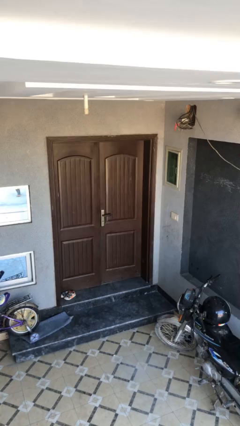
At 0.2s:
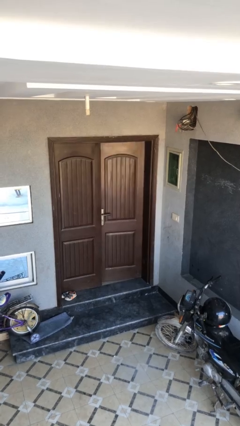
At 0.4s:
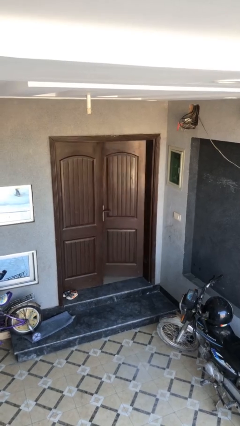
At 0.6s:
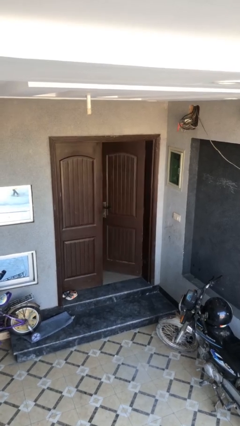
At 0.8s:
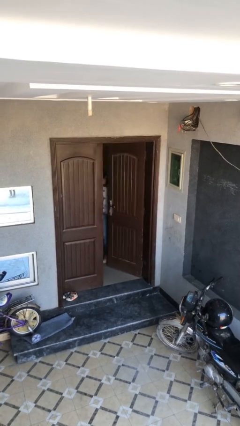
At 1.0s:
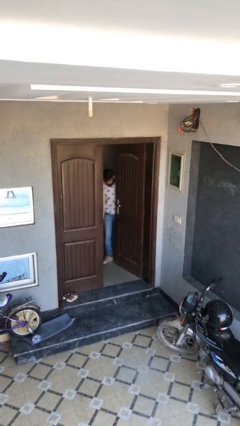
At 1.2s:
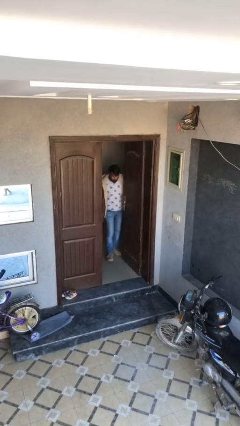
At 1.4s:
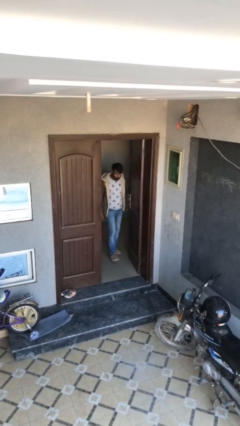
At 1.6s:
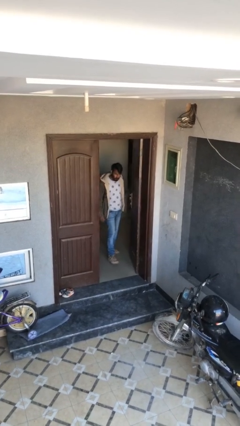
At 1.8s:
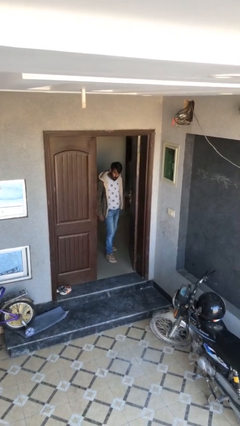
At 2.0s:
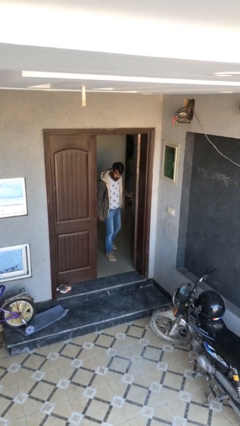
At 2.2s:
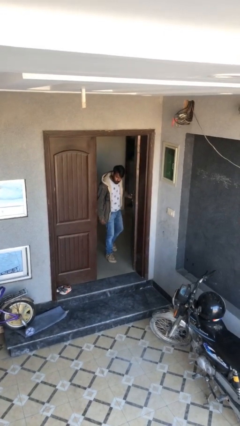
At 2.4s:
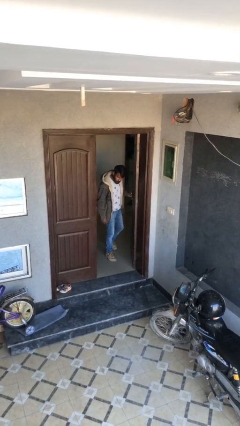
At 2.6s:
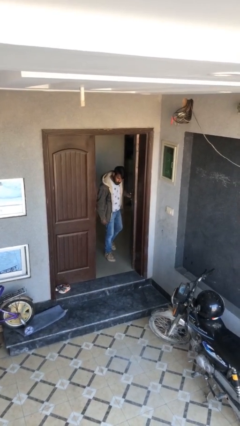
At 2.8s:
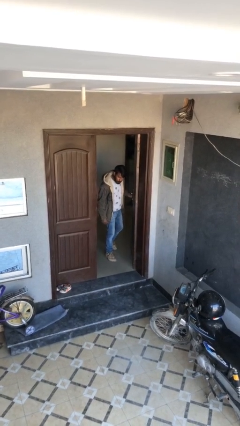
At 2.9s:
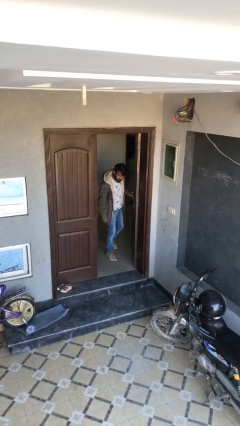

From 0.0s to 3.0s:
person opens facility door

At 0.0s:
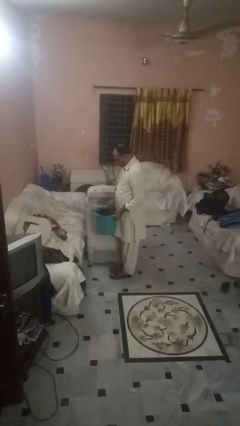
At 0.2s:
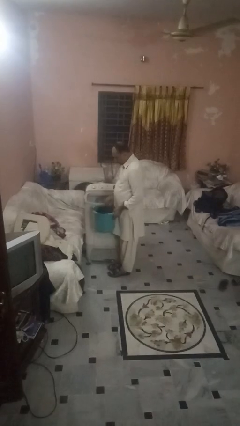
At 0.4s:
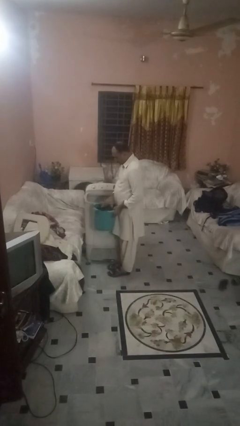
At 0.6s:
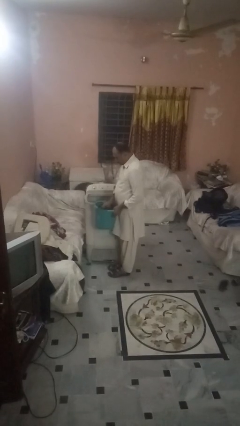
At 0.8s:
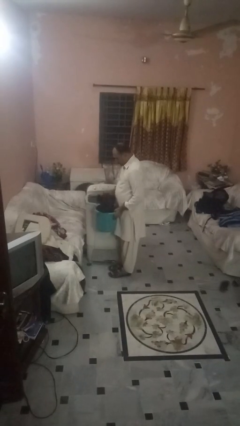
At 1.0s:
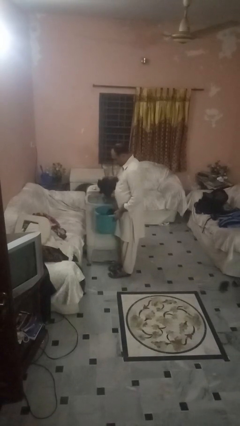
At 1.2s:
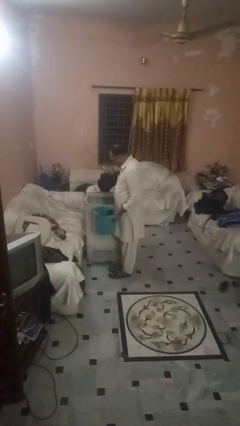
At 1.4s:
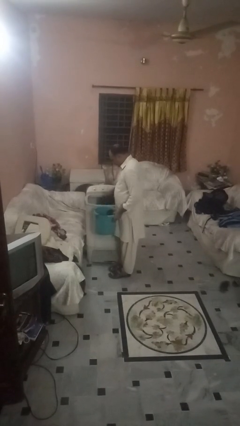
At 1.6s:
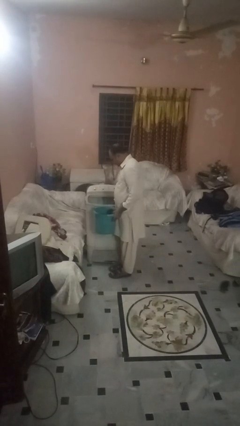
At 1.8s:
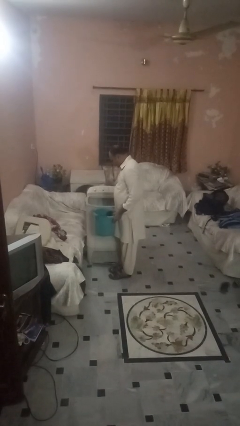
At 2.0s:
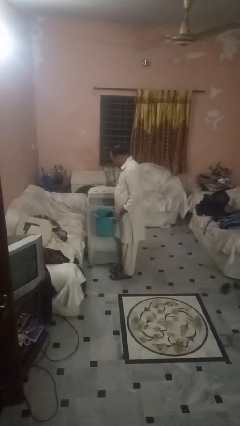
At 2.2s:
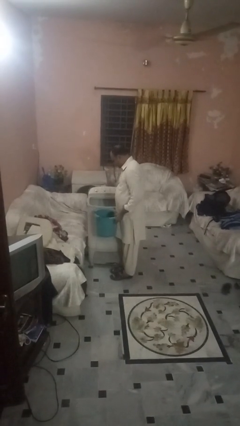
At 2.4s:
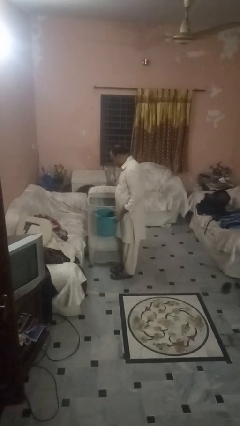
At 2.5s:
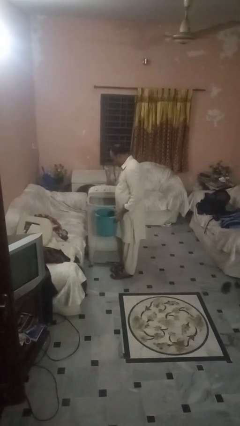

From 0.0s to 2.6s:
person loads clotheswasher

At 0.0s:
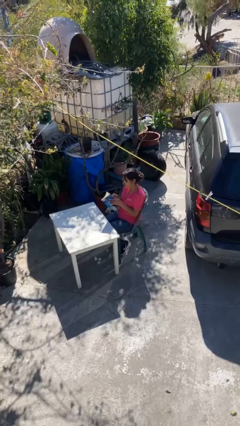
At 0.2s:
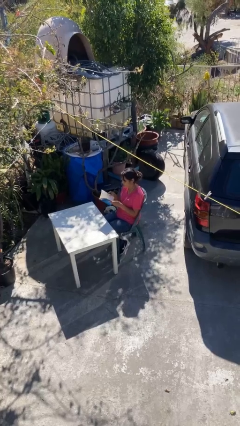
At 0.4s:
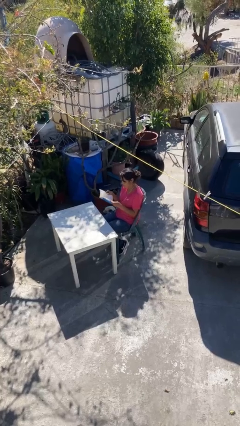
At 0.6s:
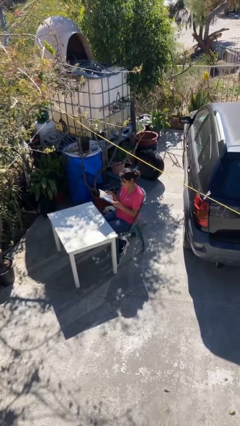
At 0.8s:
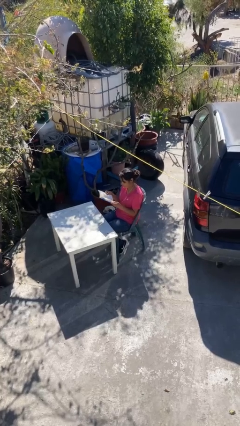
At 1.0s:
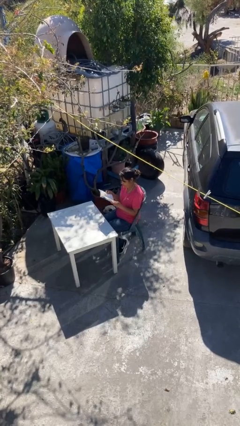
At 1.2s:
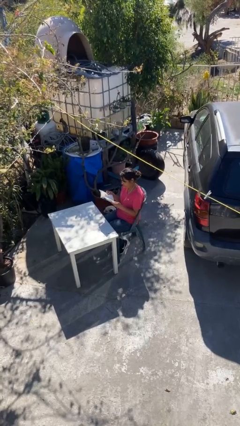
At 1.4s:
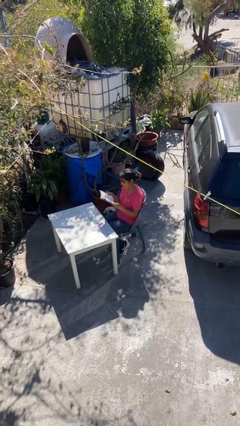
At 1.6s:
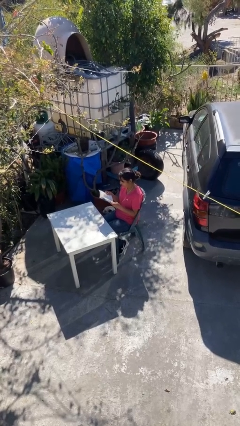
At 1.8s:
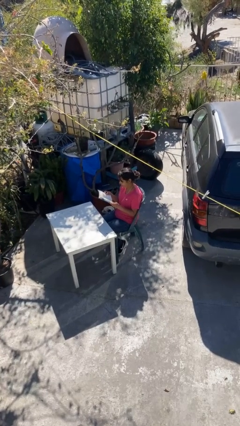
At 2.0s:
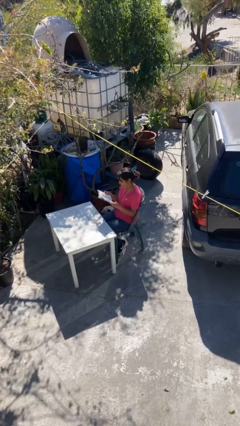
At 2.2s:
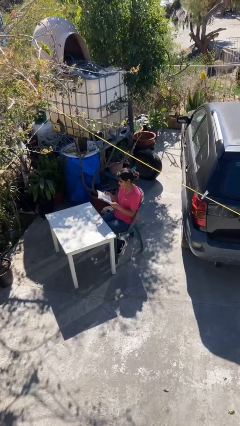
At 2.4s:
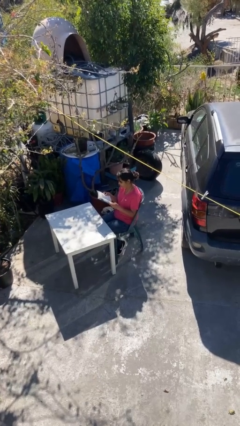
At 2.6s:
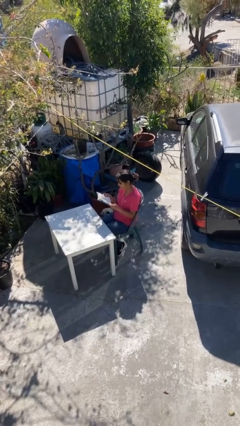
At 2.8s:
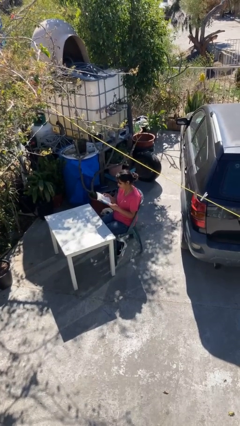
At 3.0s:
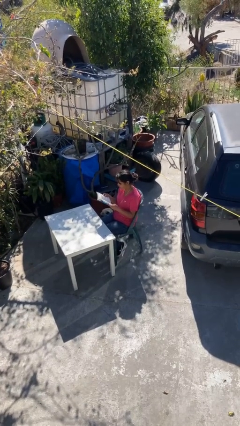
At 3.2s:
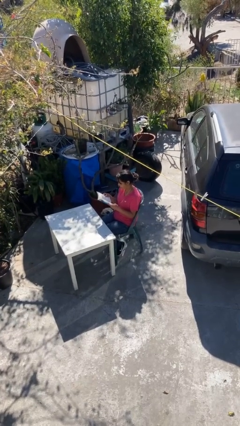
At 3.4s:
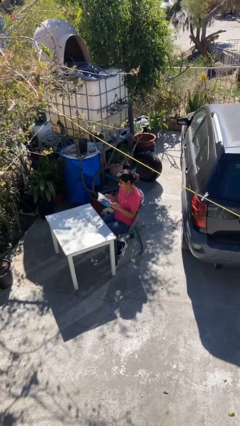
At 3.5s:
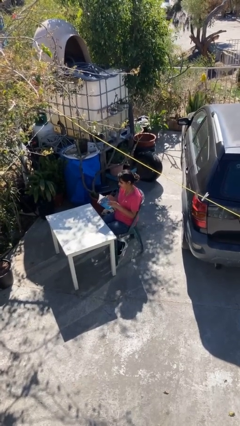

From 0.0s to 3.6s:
person reads document

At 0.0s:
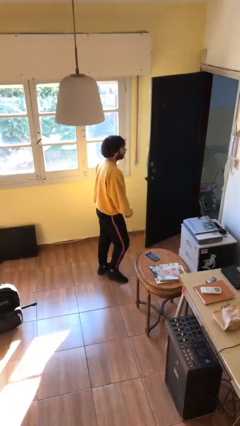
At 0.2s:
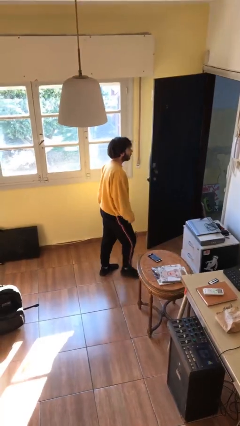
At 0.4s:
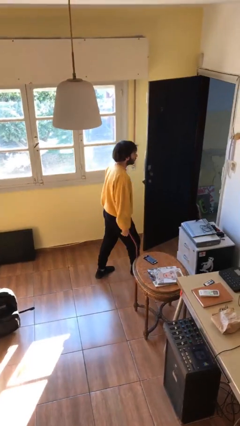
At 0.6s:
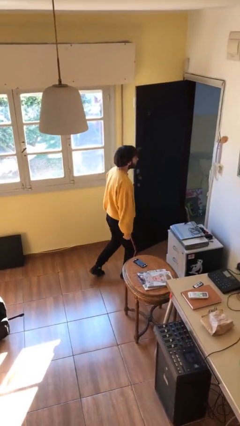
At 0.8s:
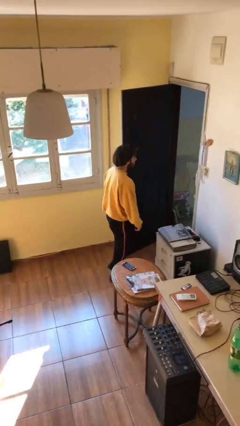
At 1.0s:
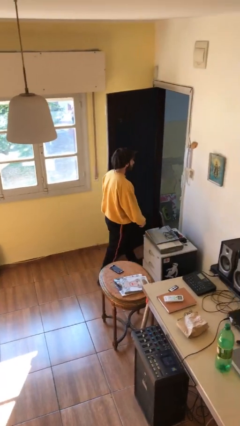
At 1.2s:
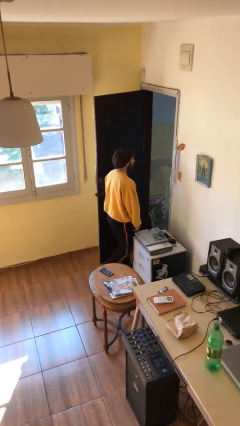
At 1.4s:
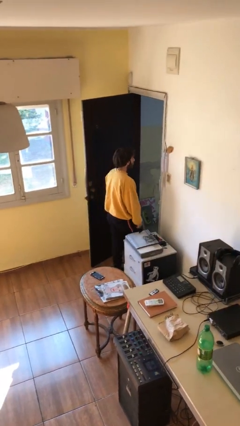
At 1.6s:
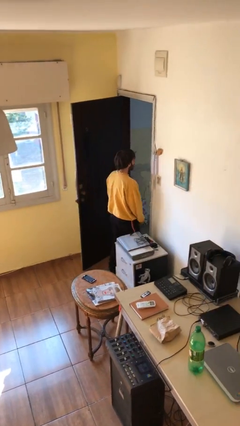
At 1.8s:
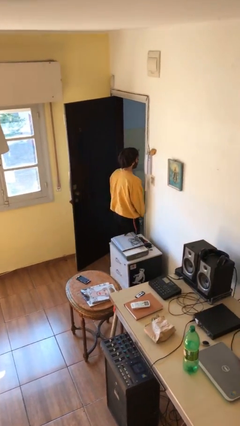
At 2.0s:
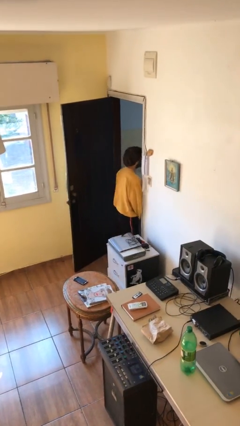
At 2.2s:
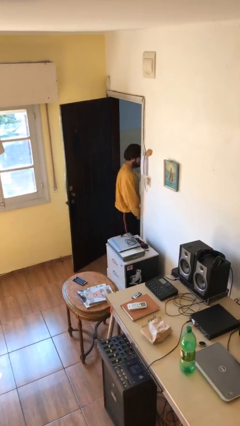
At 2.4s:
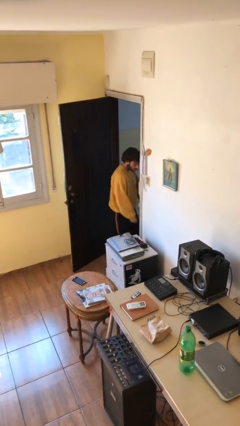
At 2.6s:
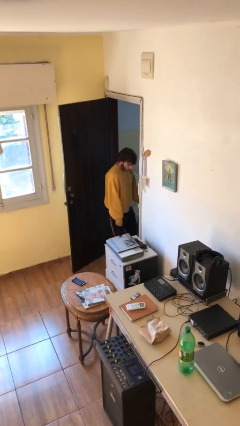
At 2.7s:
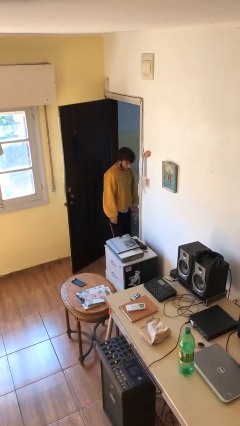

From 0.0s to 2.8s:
person bumps into wall

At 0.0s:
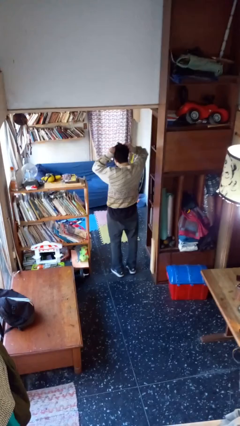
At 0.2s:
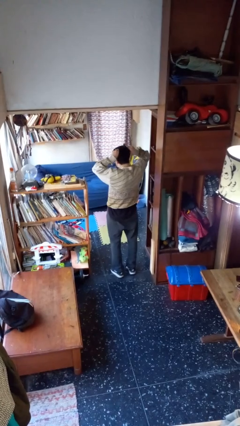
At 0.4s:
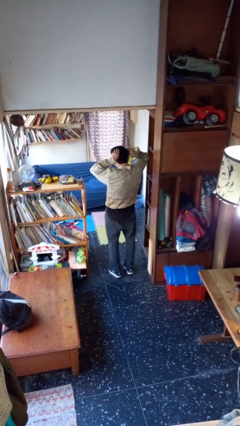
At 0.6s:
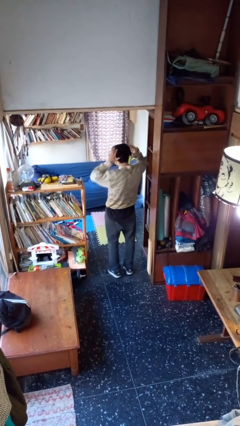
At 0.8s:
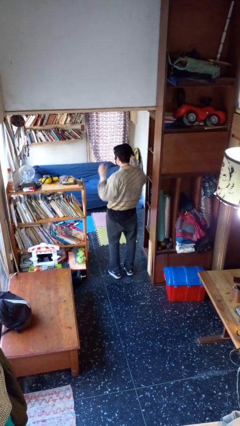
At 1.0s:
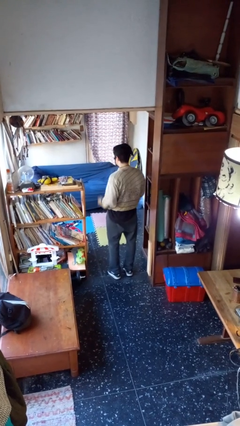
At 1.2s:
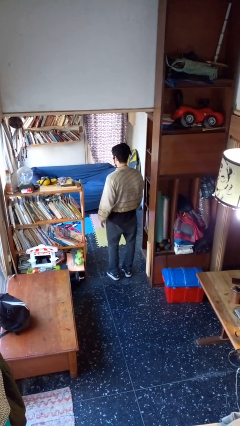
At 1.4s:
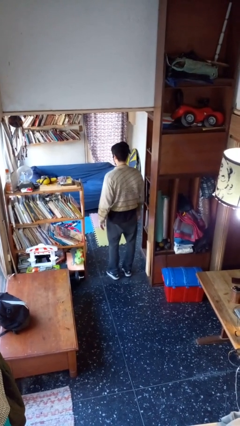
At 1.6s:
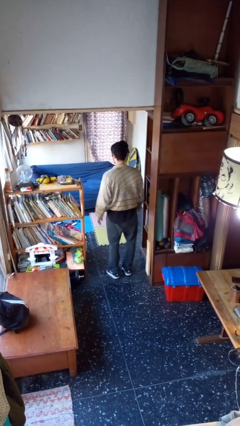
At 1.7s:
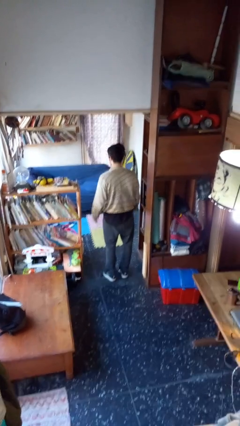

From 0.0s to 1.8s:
person puts on facemask

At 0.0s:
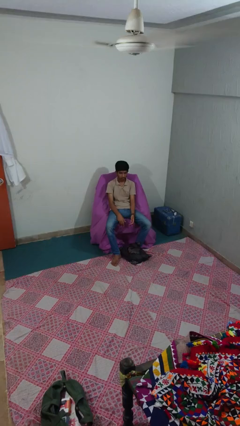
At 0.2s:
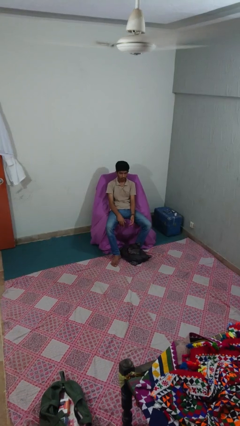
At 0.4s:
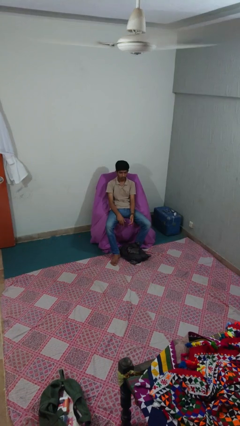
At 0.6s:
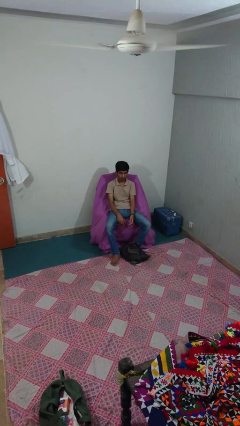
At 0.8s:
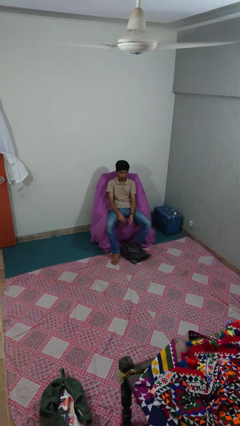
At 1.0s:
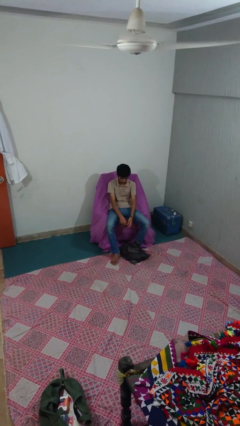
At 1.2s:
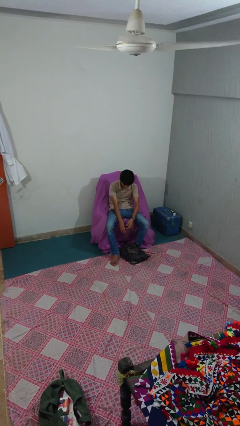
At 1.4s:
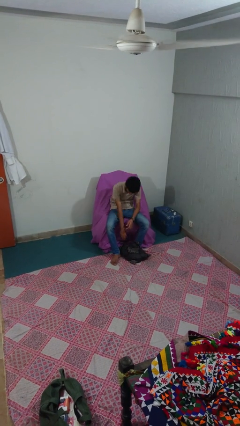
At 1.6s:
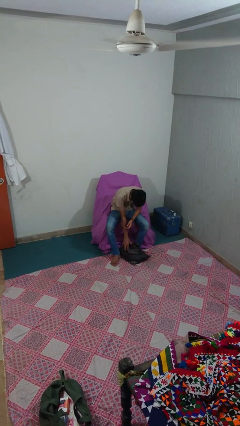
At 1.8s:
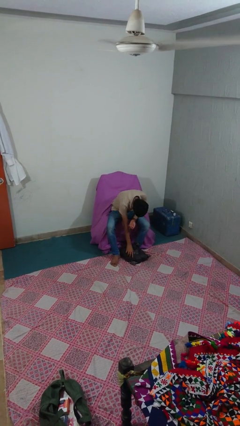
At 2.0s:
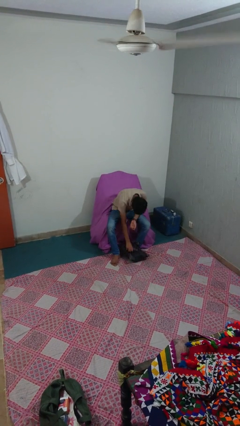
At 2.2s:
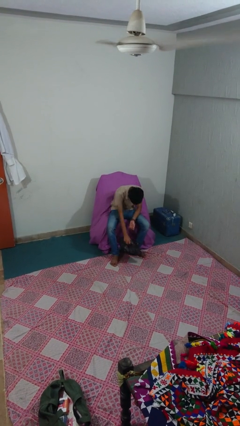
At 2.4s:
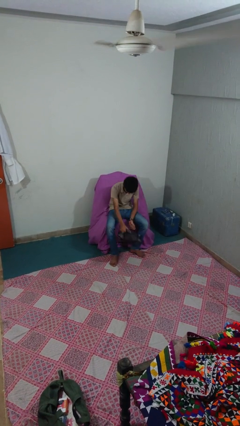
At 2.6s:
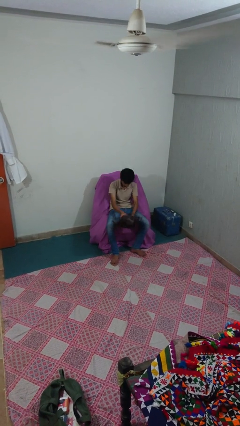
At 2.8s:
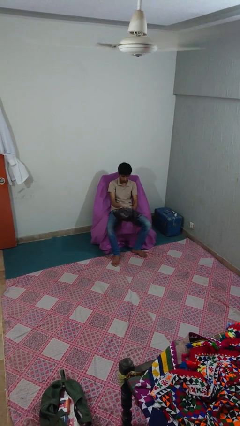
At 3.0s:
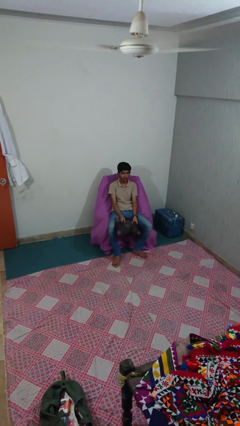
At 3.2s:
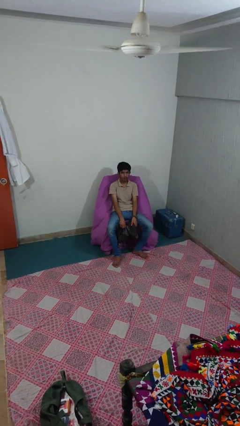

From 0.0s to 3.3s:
person picks up object from floor

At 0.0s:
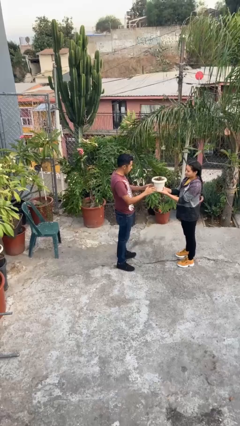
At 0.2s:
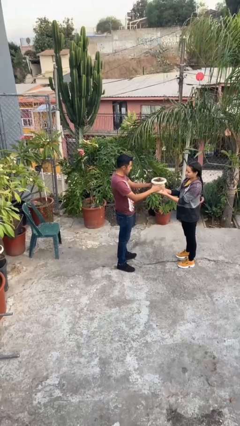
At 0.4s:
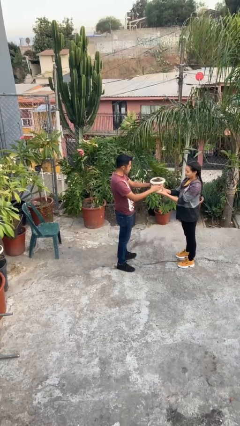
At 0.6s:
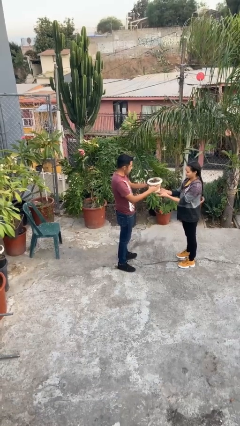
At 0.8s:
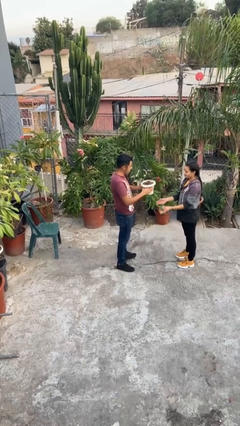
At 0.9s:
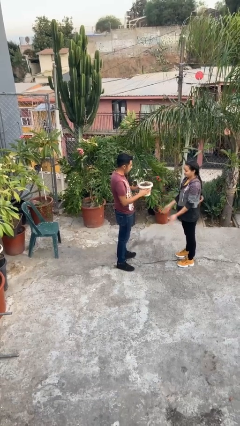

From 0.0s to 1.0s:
person transfers object to person
